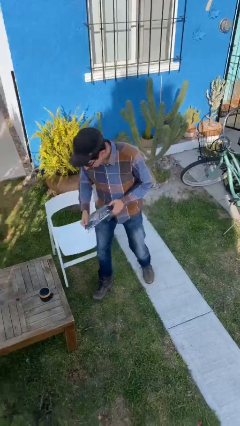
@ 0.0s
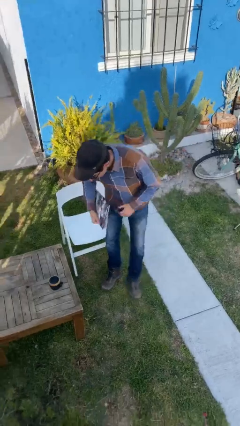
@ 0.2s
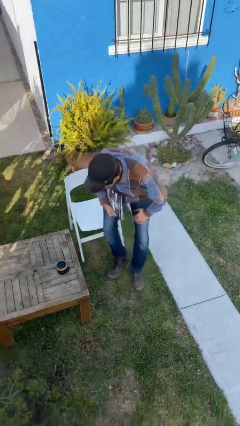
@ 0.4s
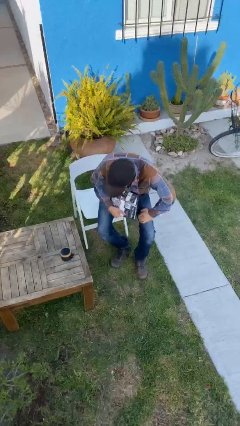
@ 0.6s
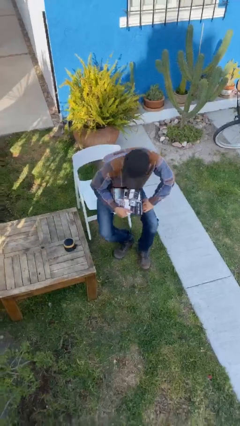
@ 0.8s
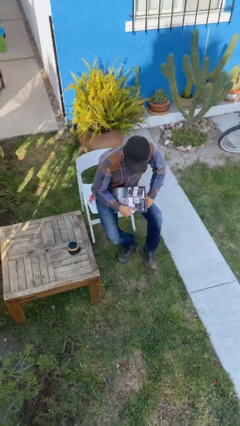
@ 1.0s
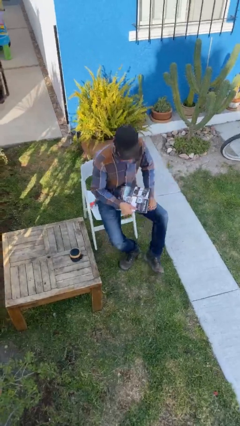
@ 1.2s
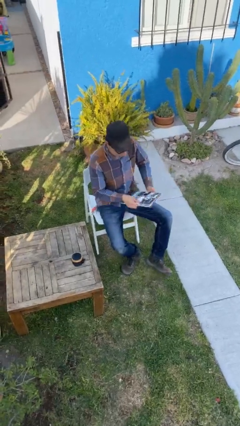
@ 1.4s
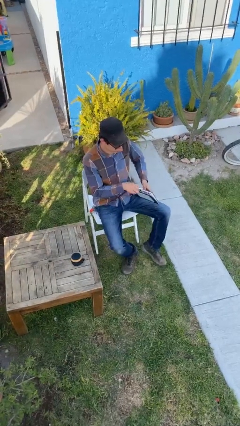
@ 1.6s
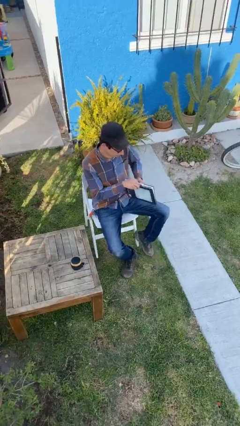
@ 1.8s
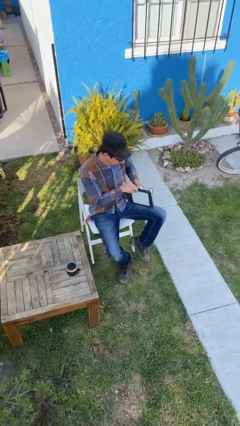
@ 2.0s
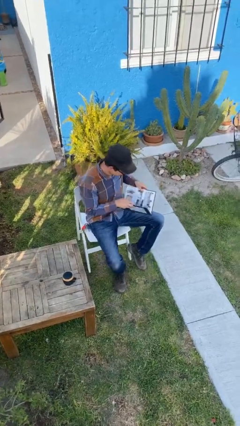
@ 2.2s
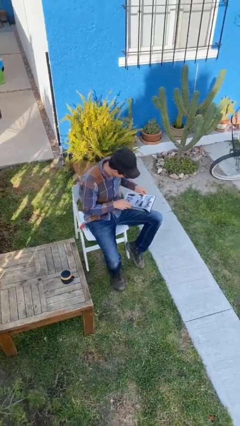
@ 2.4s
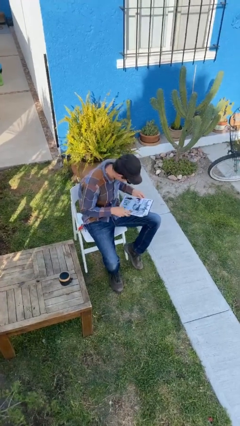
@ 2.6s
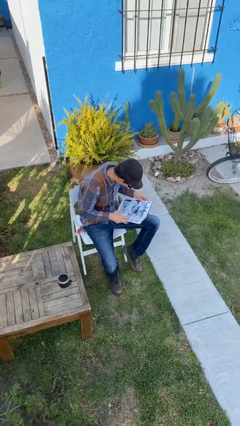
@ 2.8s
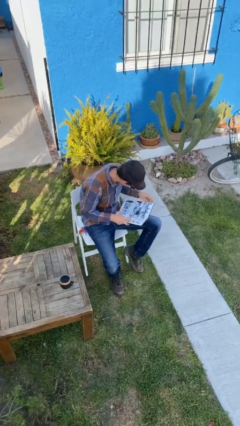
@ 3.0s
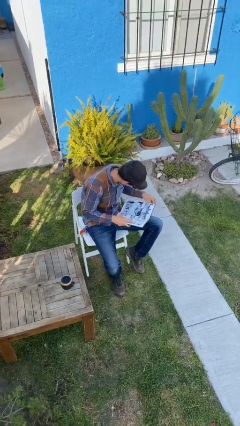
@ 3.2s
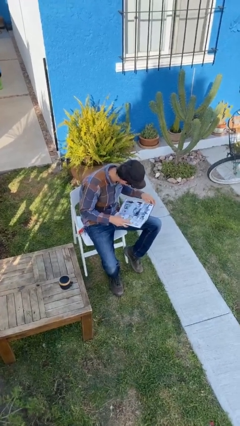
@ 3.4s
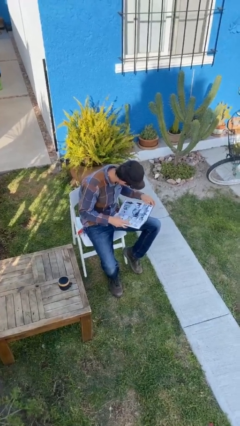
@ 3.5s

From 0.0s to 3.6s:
person sits down

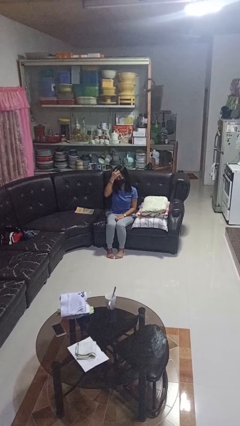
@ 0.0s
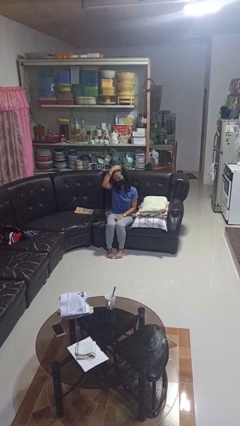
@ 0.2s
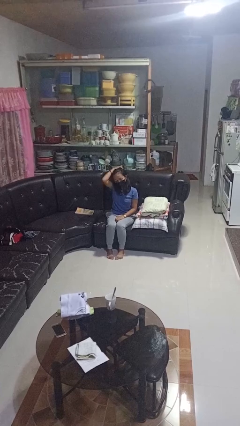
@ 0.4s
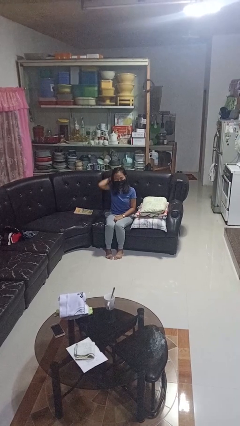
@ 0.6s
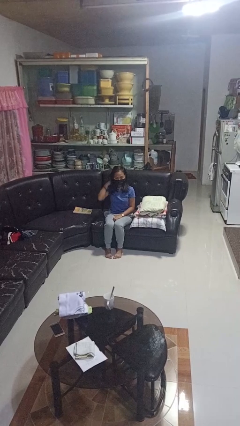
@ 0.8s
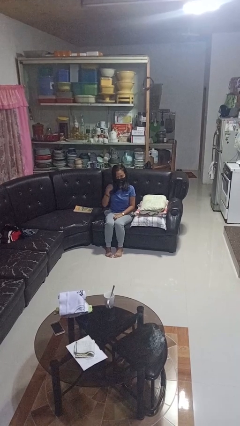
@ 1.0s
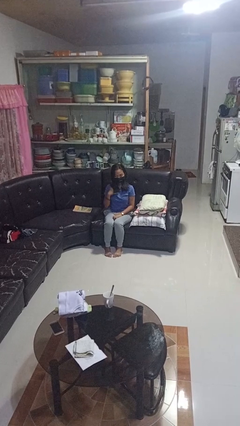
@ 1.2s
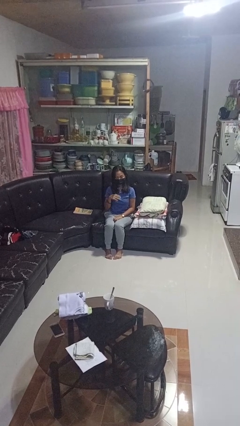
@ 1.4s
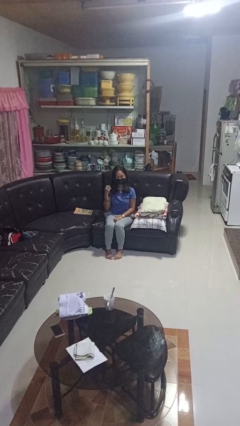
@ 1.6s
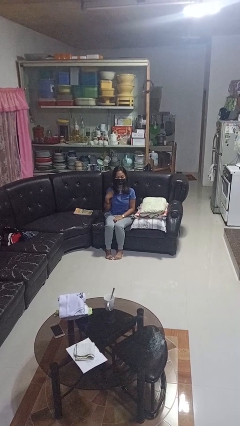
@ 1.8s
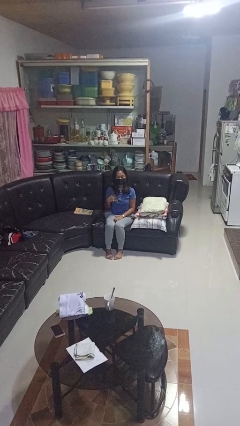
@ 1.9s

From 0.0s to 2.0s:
person strokes hair

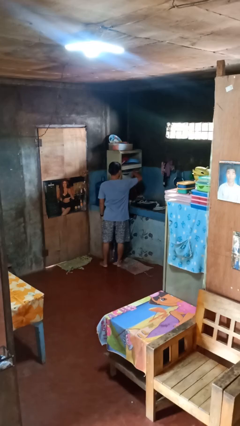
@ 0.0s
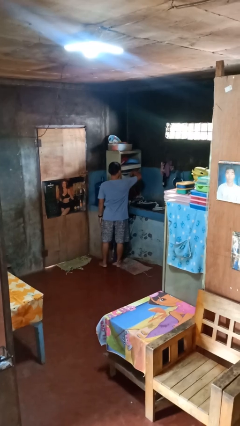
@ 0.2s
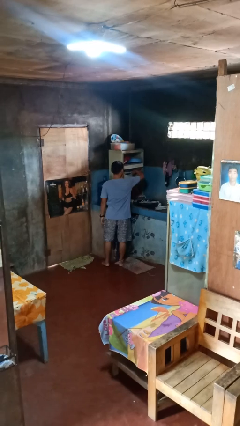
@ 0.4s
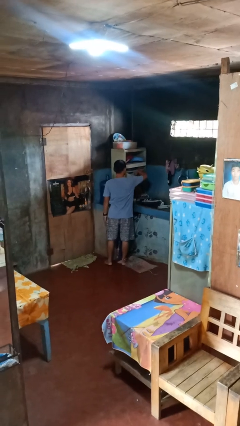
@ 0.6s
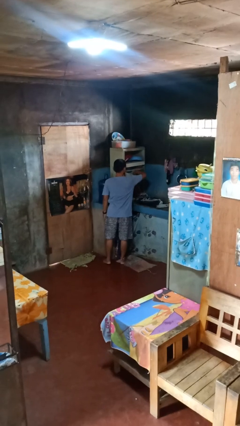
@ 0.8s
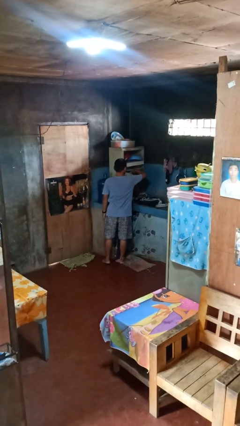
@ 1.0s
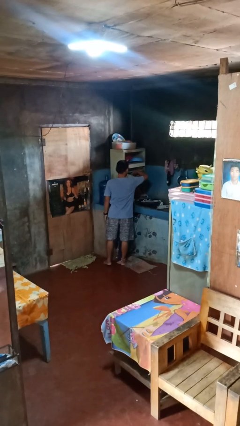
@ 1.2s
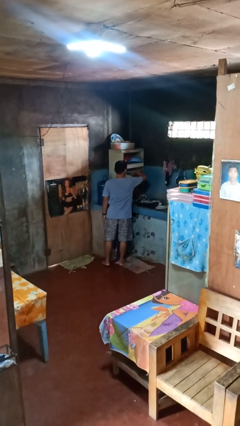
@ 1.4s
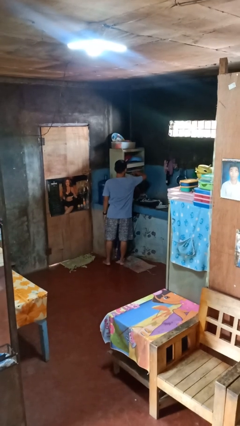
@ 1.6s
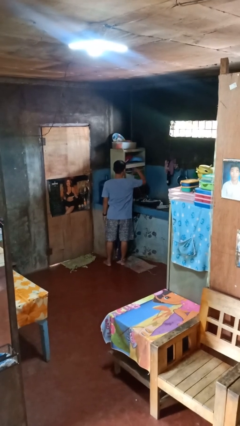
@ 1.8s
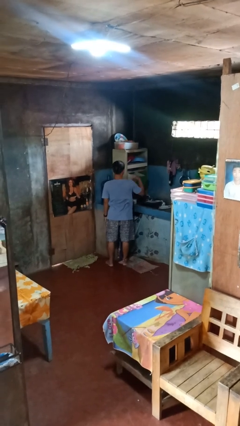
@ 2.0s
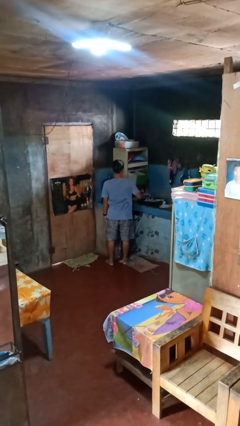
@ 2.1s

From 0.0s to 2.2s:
person searches in kitchen drawer

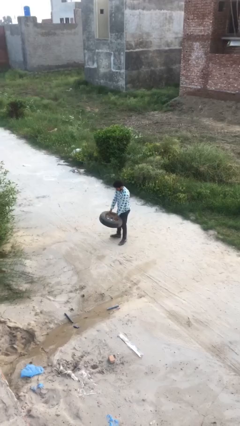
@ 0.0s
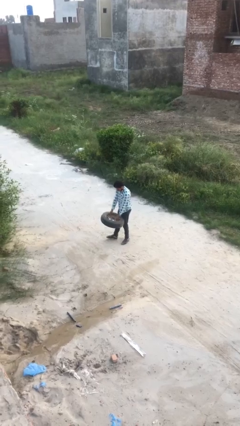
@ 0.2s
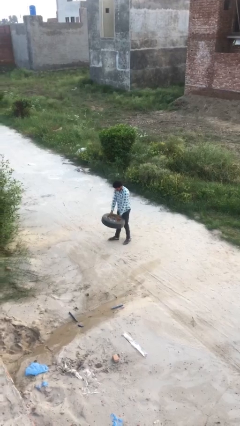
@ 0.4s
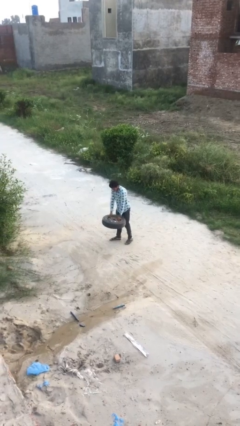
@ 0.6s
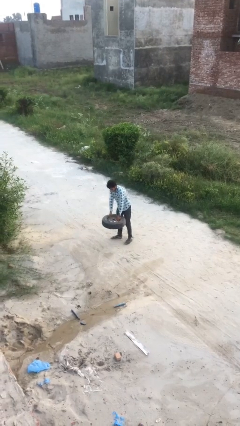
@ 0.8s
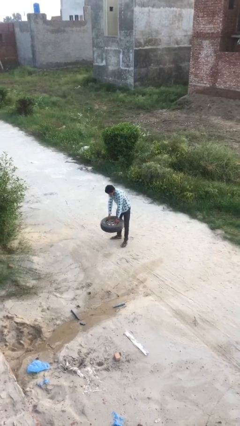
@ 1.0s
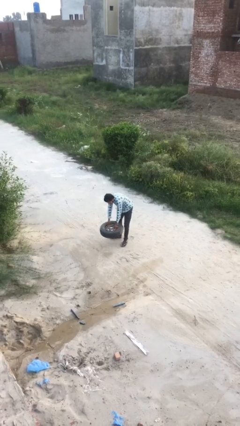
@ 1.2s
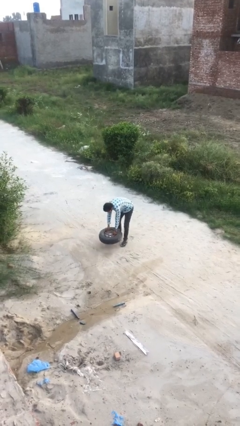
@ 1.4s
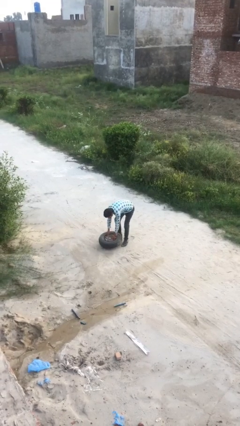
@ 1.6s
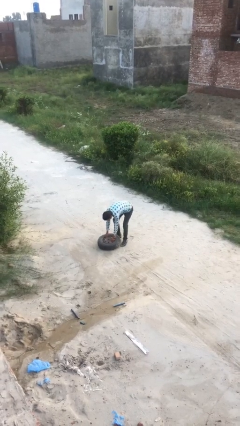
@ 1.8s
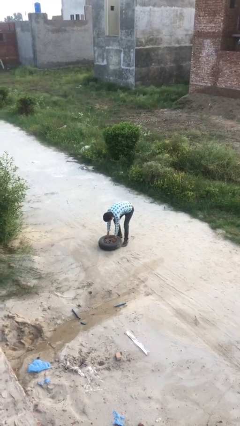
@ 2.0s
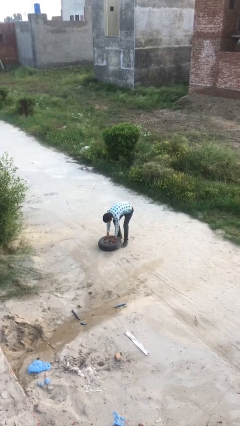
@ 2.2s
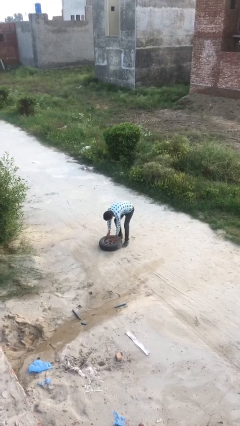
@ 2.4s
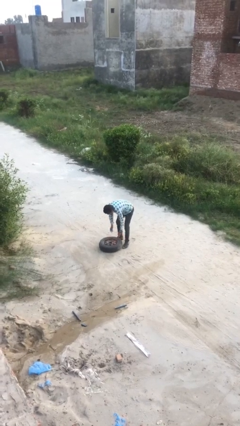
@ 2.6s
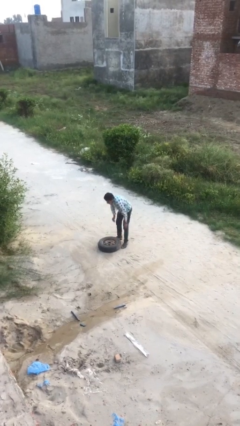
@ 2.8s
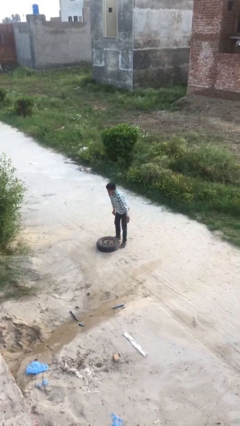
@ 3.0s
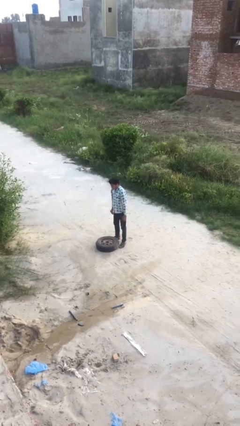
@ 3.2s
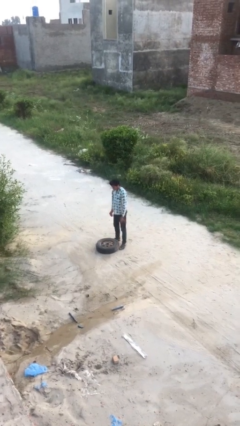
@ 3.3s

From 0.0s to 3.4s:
person puts down object on floor

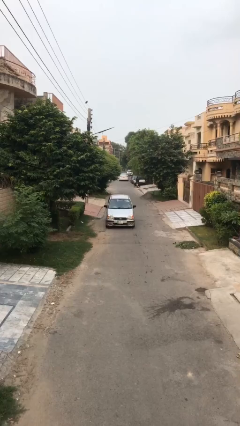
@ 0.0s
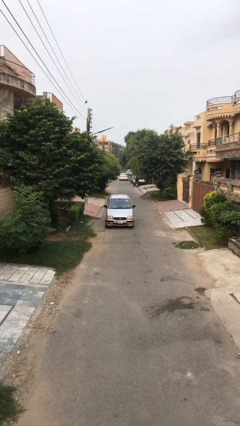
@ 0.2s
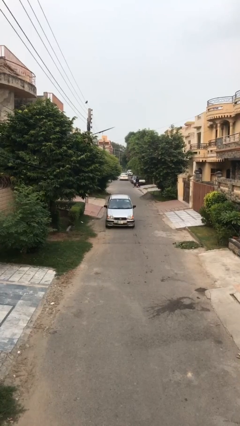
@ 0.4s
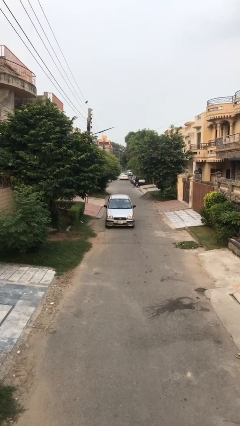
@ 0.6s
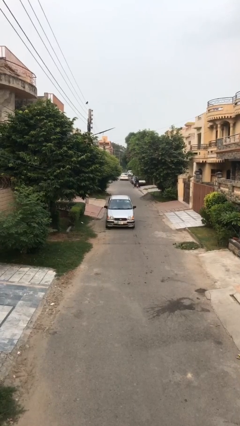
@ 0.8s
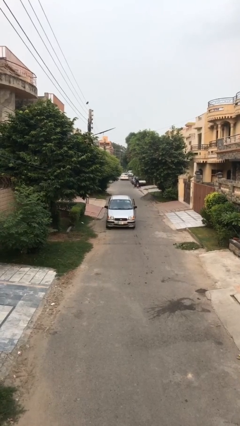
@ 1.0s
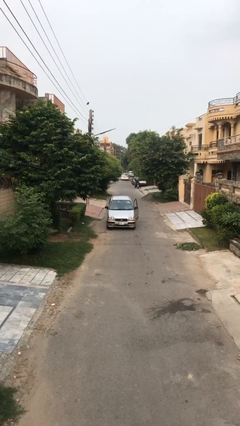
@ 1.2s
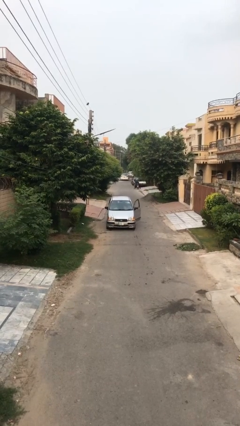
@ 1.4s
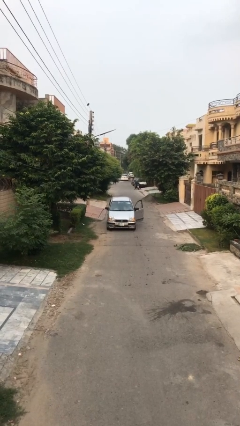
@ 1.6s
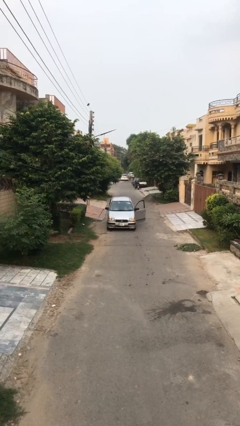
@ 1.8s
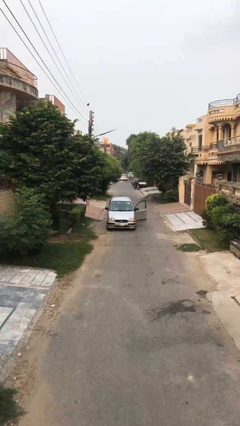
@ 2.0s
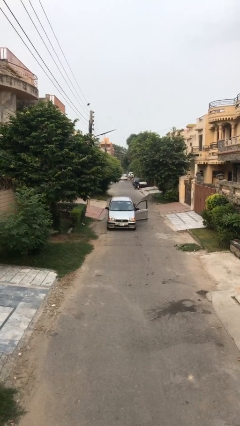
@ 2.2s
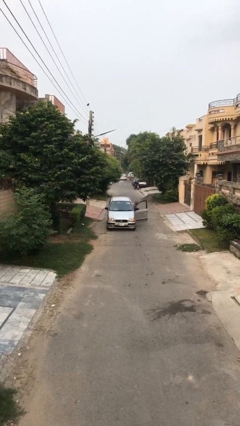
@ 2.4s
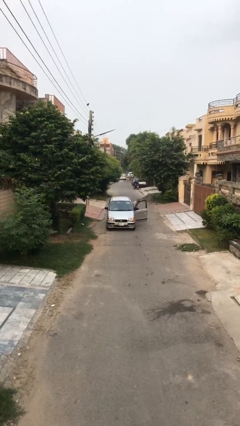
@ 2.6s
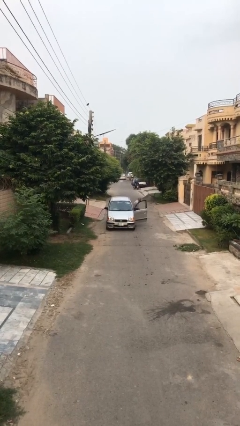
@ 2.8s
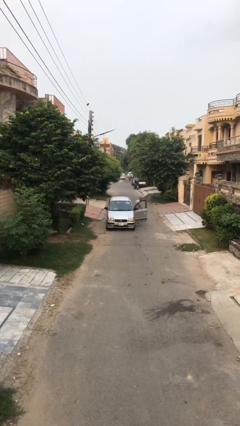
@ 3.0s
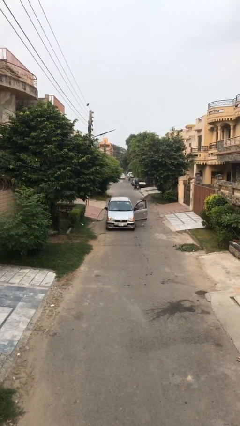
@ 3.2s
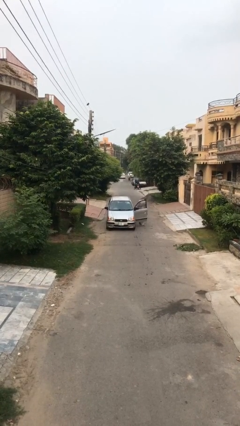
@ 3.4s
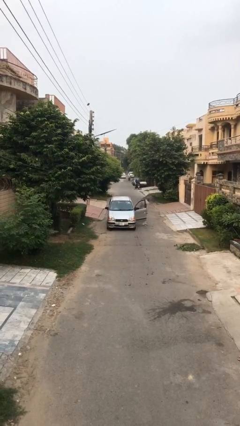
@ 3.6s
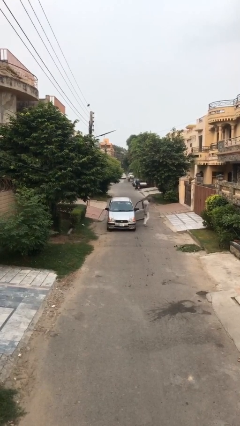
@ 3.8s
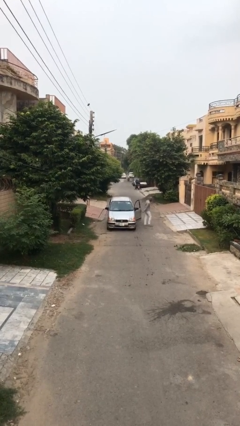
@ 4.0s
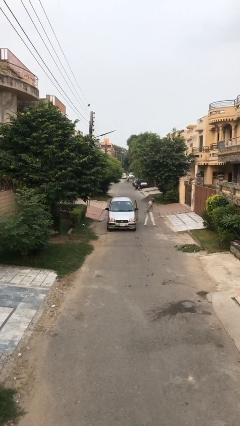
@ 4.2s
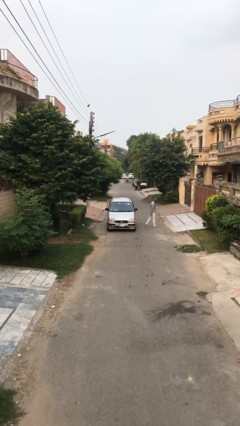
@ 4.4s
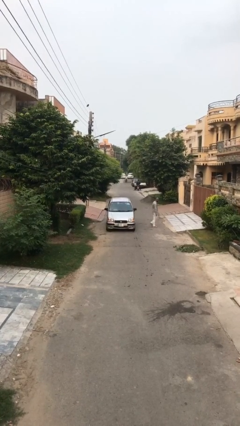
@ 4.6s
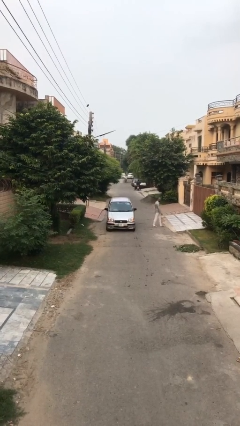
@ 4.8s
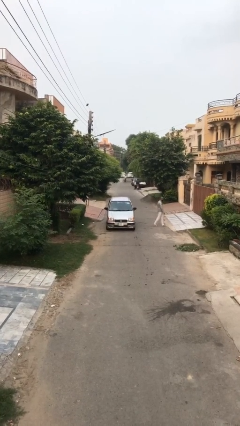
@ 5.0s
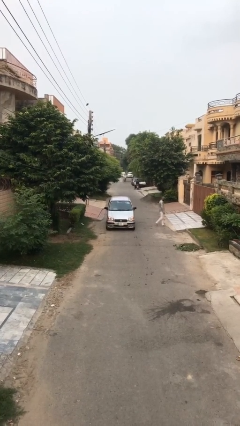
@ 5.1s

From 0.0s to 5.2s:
car drops off person

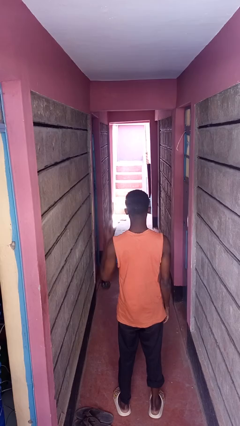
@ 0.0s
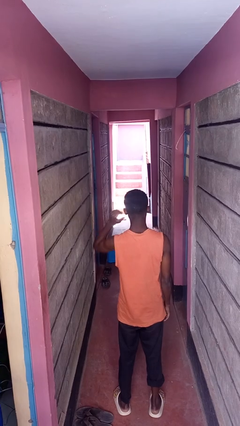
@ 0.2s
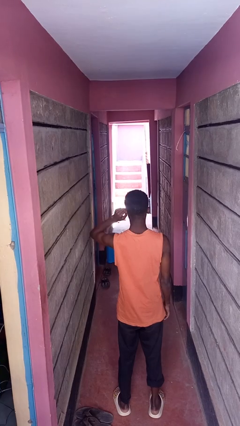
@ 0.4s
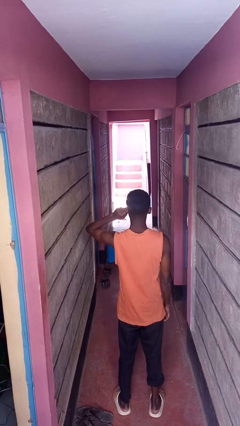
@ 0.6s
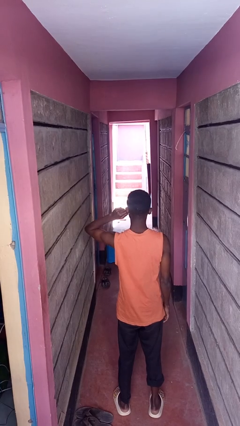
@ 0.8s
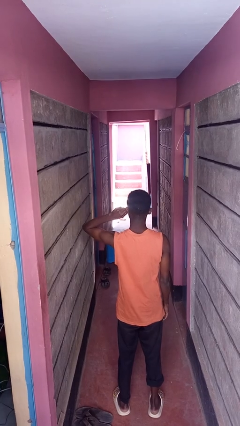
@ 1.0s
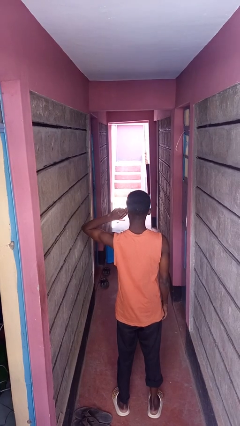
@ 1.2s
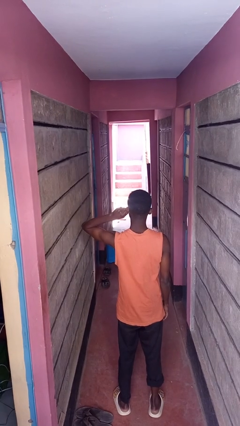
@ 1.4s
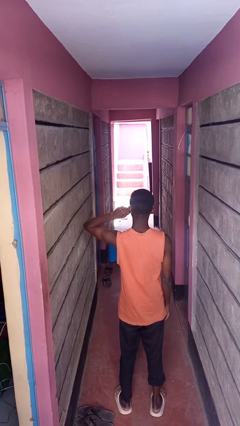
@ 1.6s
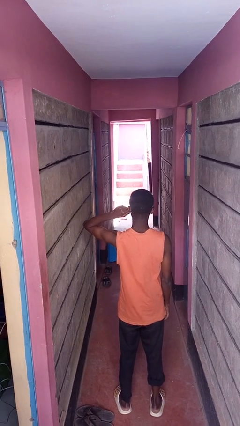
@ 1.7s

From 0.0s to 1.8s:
person touches earlobe
